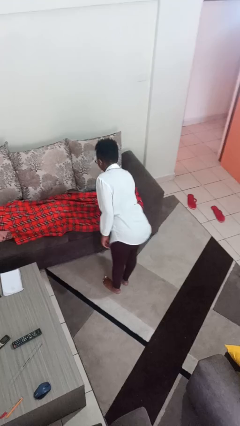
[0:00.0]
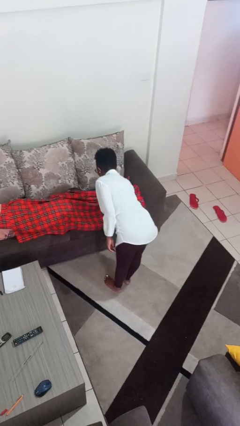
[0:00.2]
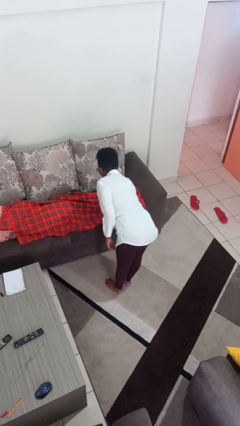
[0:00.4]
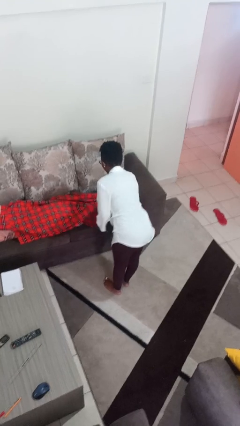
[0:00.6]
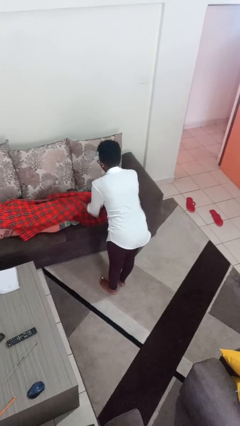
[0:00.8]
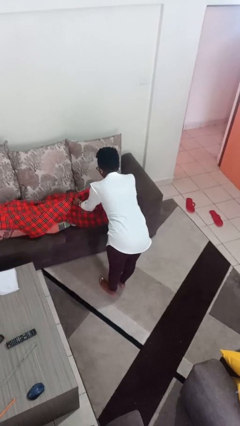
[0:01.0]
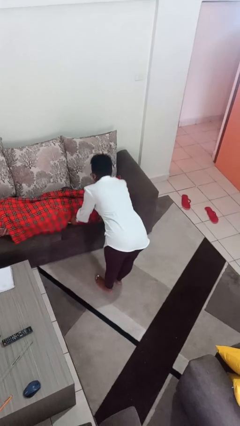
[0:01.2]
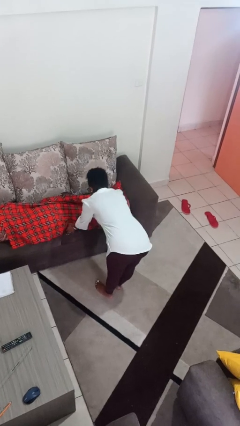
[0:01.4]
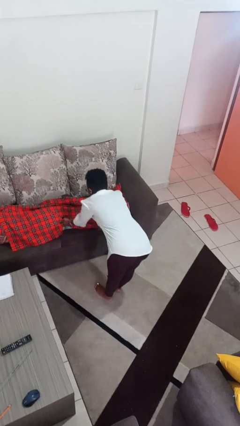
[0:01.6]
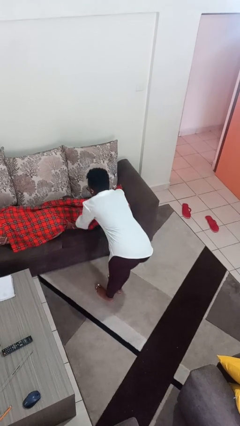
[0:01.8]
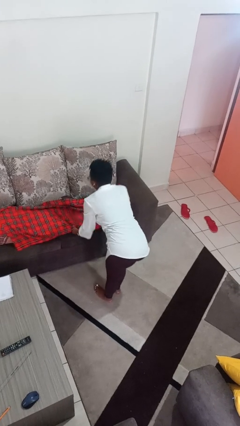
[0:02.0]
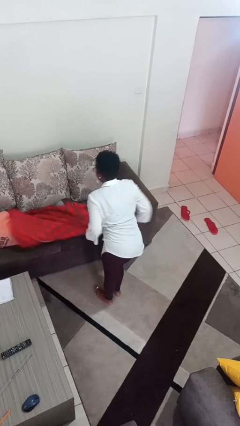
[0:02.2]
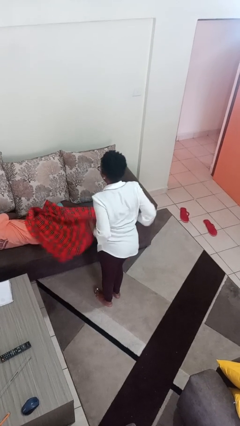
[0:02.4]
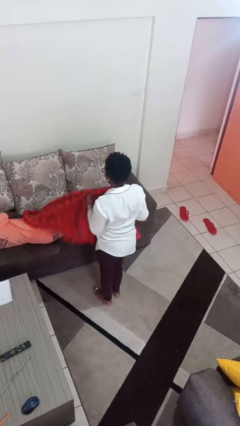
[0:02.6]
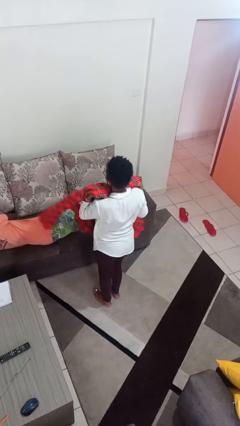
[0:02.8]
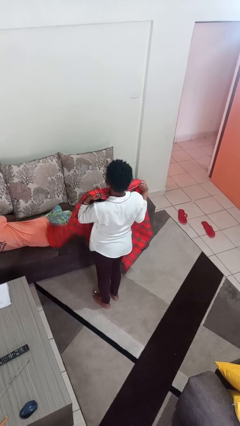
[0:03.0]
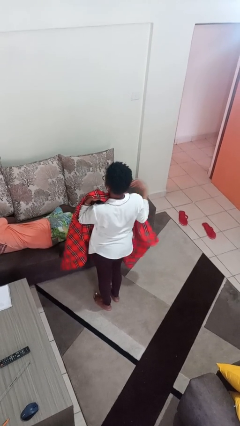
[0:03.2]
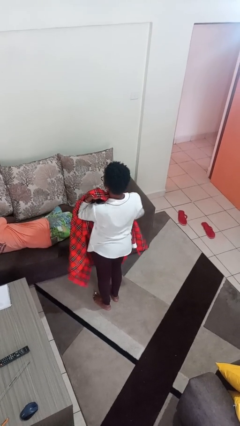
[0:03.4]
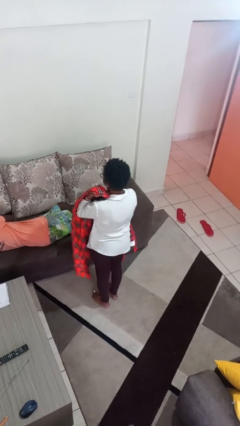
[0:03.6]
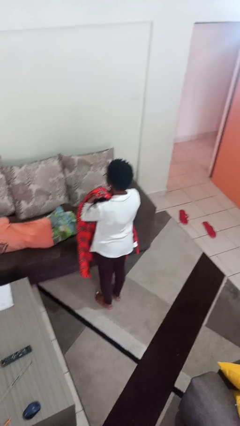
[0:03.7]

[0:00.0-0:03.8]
person uncovers friend with blanket

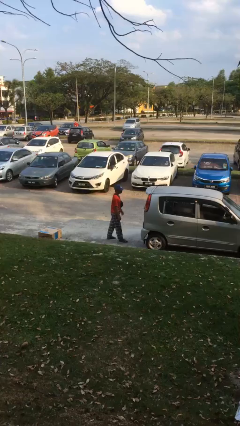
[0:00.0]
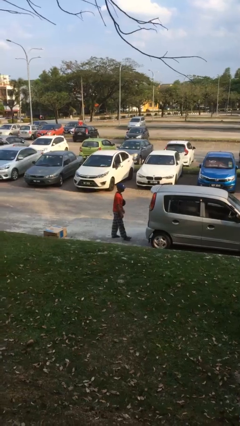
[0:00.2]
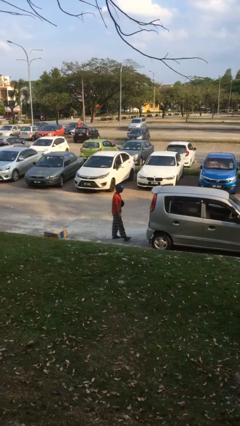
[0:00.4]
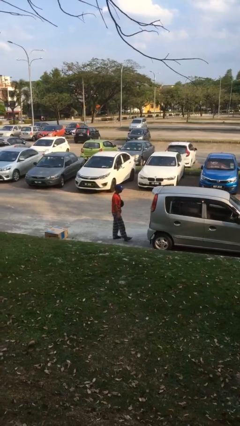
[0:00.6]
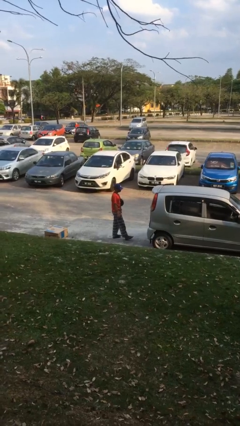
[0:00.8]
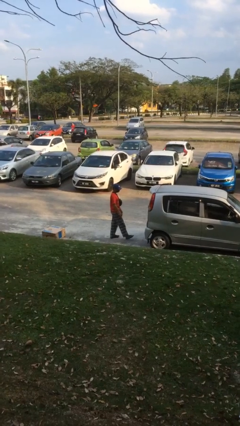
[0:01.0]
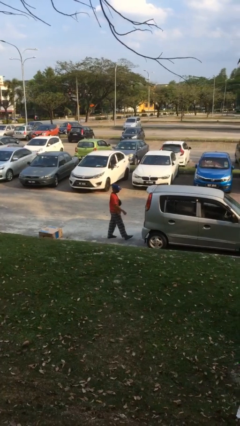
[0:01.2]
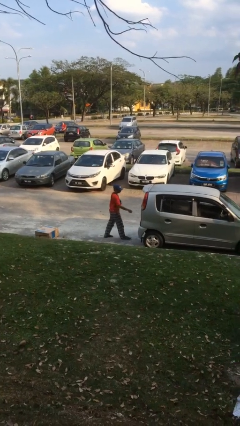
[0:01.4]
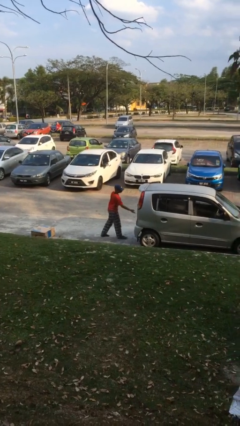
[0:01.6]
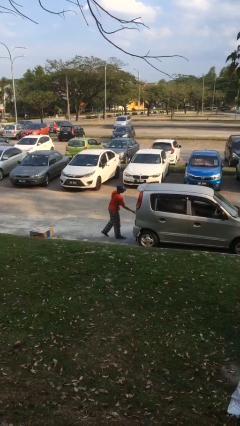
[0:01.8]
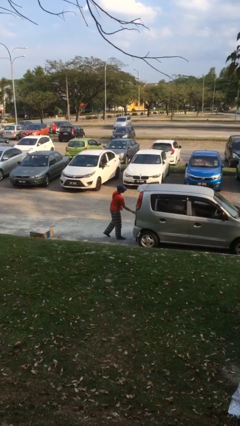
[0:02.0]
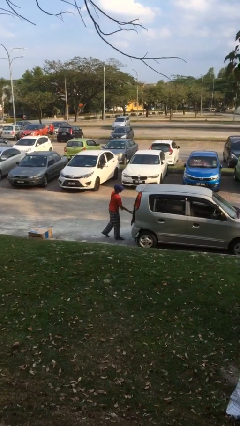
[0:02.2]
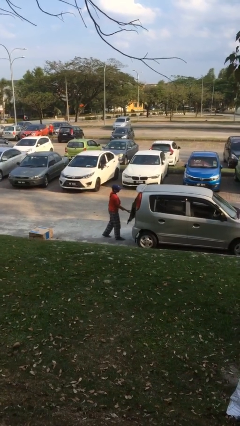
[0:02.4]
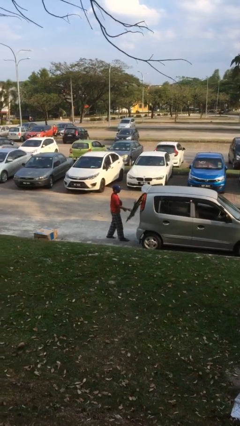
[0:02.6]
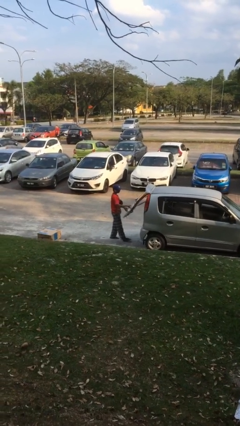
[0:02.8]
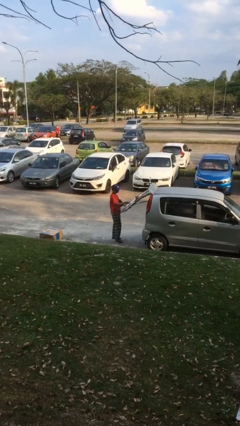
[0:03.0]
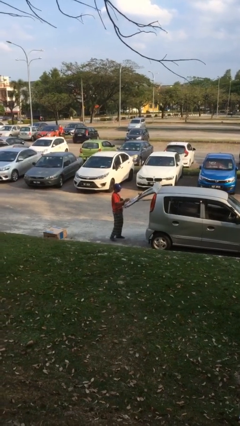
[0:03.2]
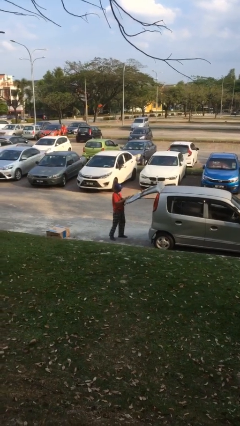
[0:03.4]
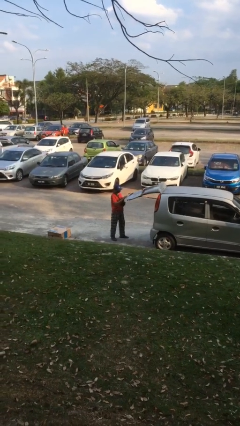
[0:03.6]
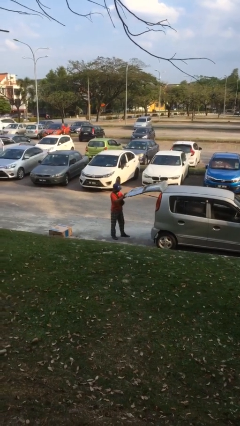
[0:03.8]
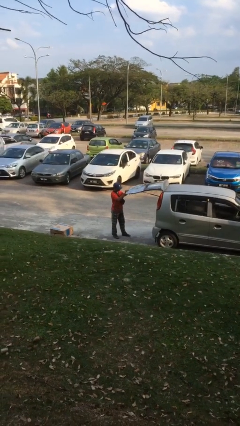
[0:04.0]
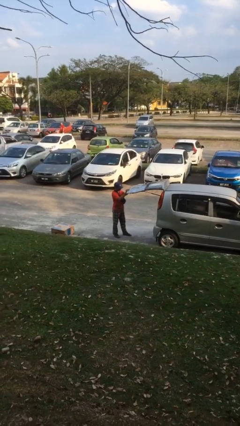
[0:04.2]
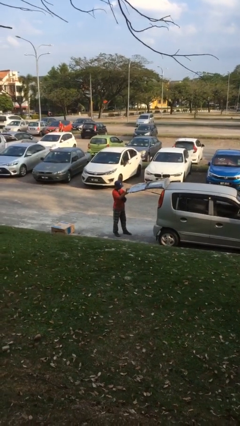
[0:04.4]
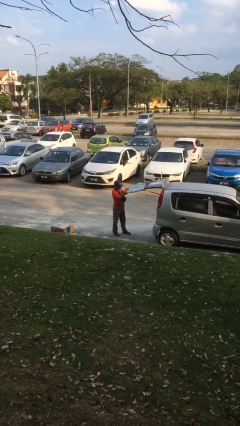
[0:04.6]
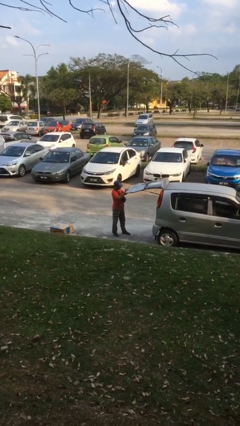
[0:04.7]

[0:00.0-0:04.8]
person opens car trunk

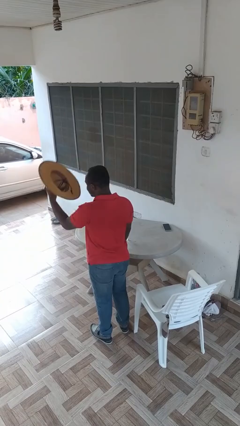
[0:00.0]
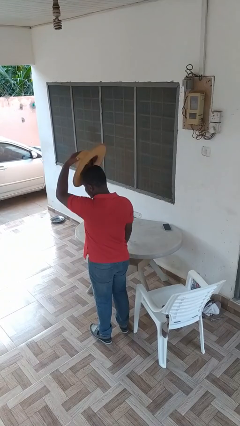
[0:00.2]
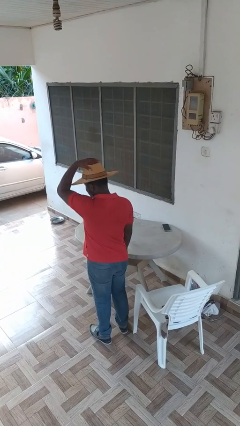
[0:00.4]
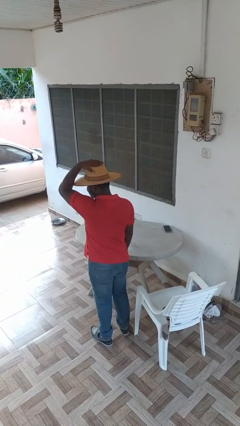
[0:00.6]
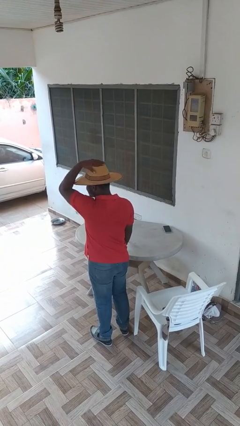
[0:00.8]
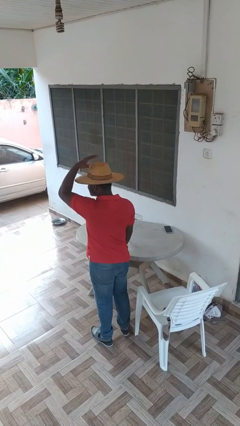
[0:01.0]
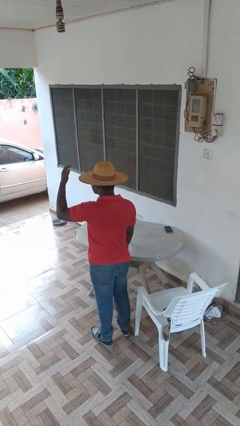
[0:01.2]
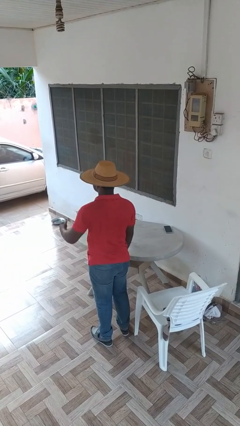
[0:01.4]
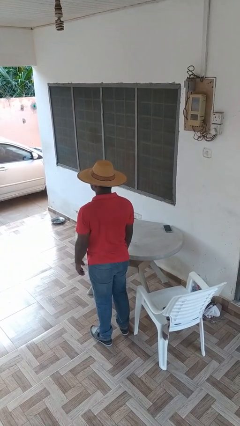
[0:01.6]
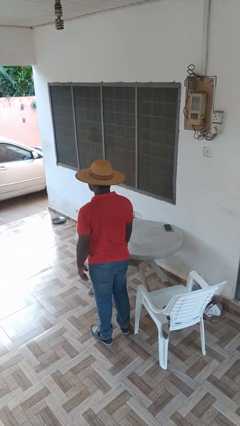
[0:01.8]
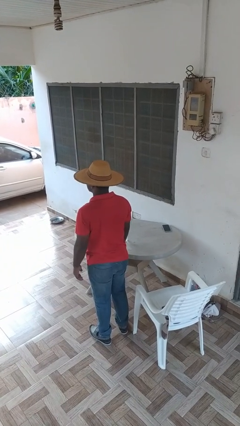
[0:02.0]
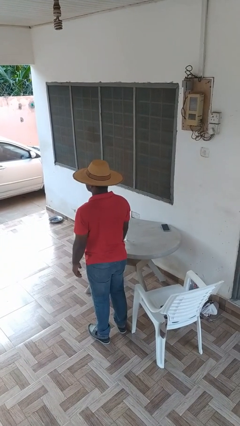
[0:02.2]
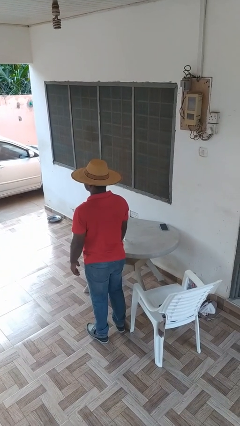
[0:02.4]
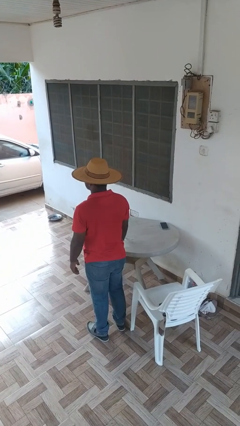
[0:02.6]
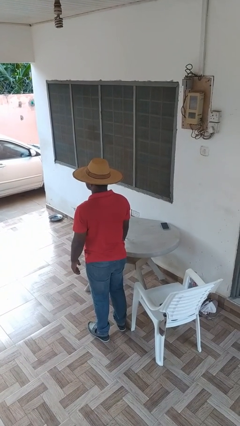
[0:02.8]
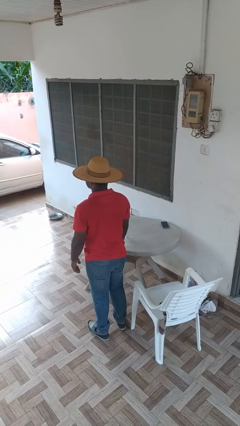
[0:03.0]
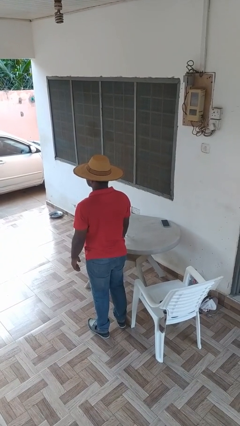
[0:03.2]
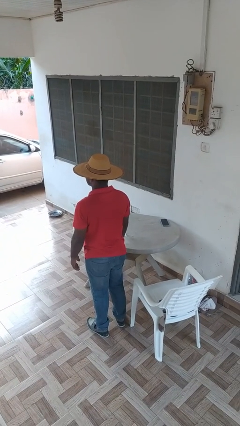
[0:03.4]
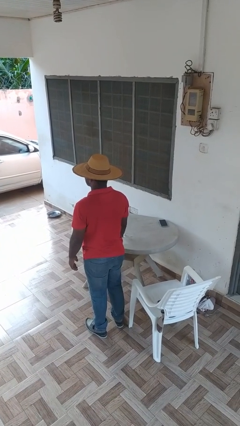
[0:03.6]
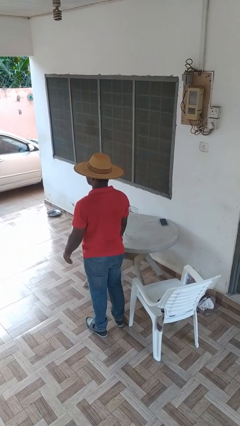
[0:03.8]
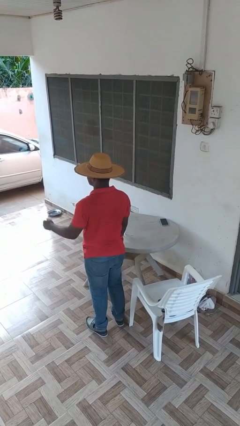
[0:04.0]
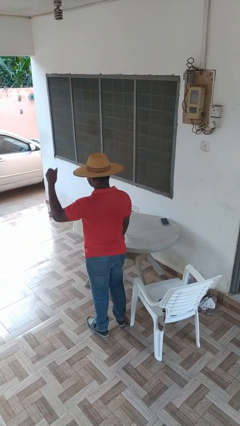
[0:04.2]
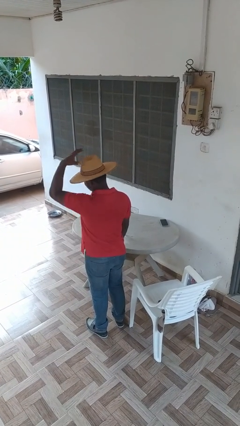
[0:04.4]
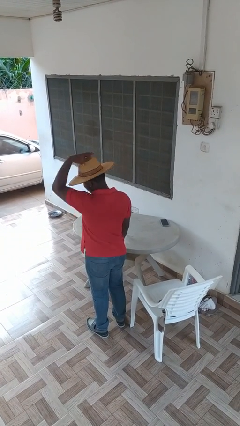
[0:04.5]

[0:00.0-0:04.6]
person puts on hat

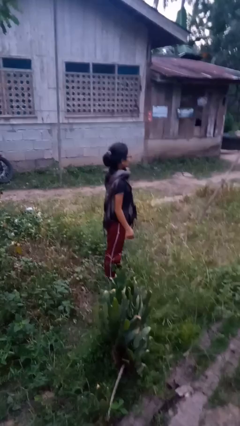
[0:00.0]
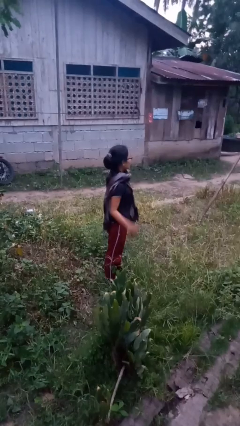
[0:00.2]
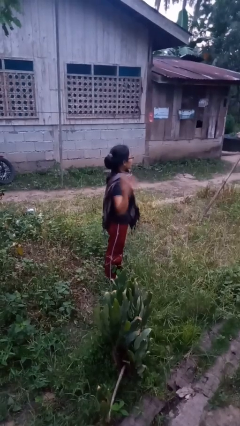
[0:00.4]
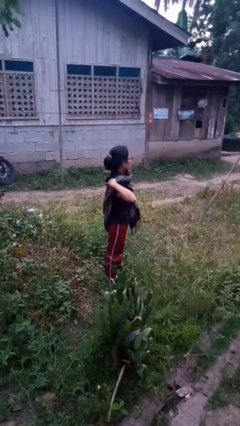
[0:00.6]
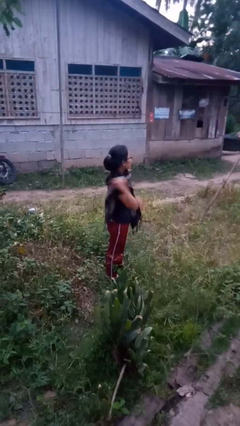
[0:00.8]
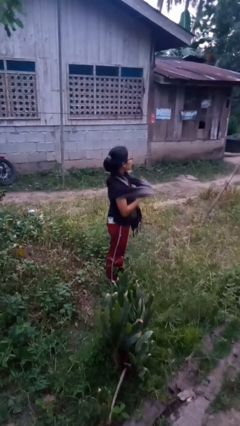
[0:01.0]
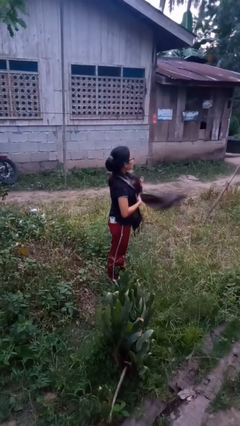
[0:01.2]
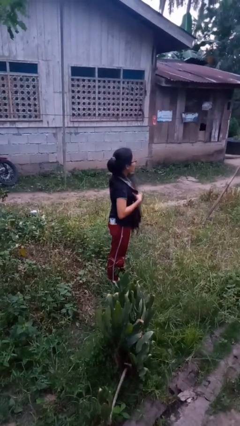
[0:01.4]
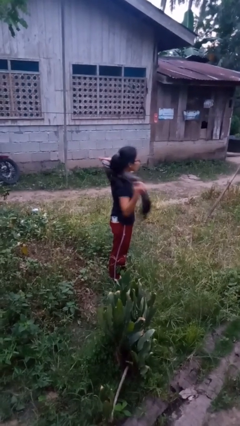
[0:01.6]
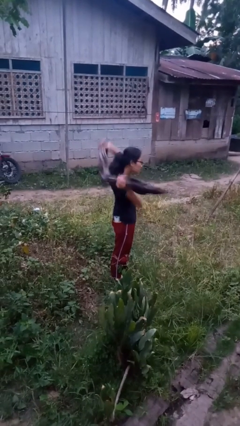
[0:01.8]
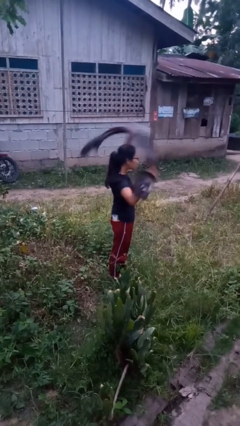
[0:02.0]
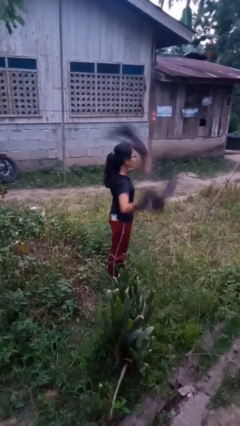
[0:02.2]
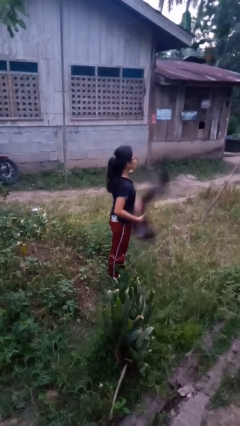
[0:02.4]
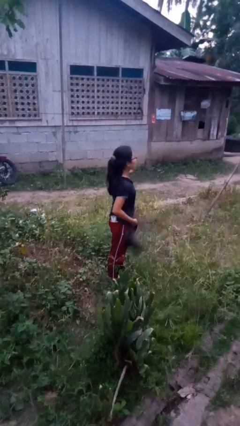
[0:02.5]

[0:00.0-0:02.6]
person takes off scarf

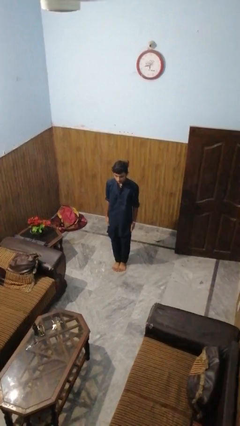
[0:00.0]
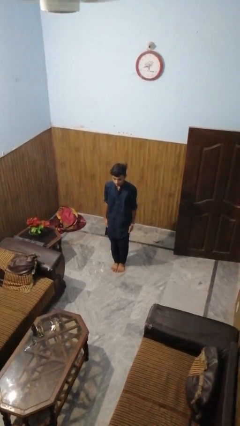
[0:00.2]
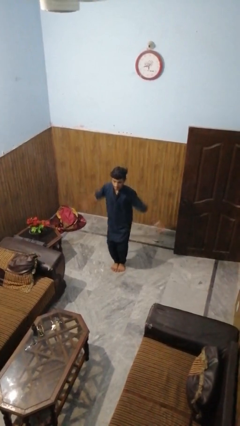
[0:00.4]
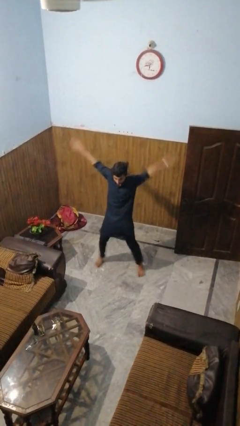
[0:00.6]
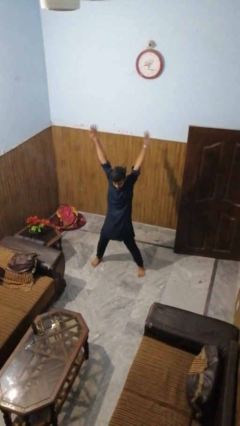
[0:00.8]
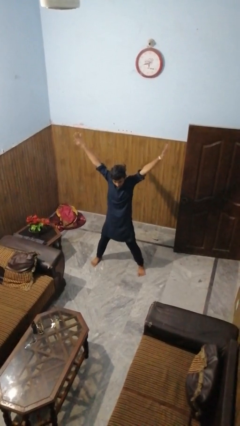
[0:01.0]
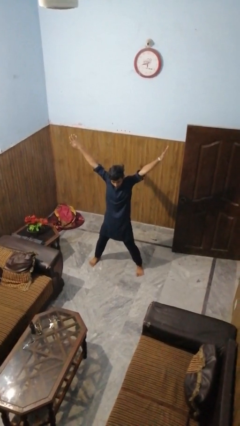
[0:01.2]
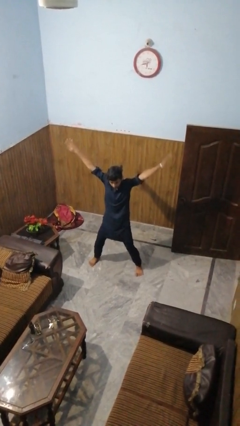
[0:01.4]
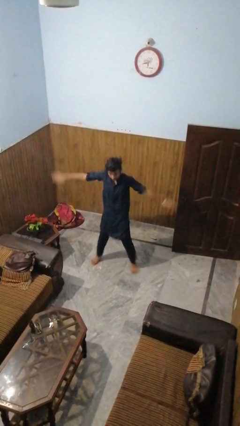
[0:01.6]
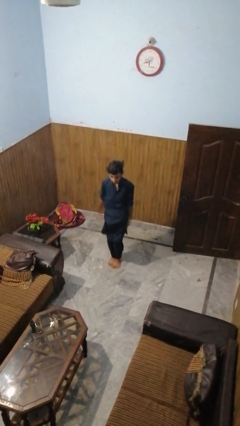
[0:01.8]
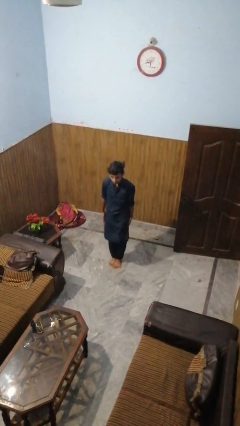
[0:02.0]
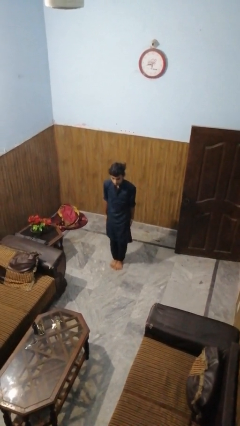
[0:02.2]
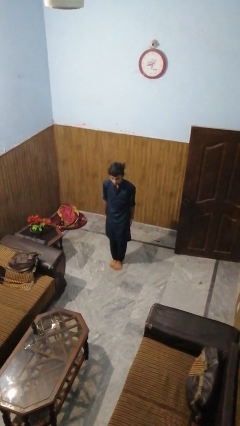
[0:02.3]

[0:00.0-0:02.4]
person exercises with jumping jacks
